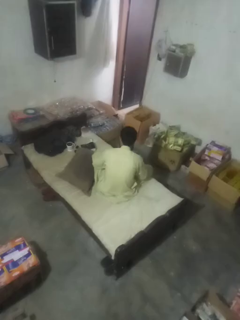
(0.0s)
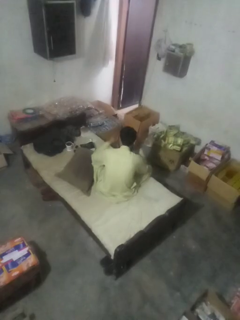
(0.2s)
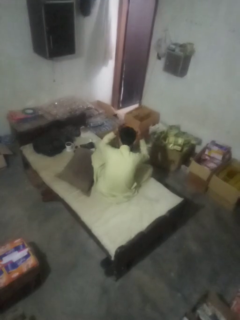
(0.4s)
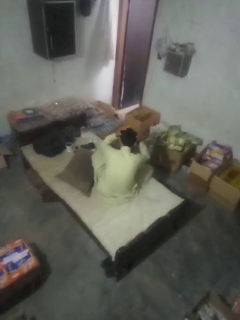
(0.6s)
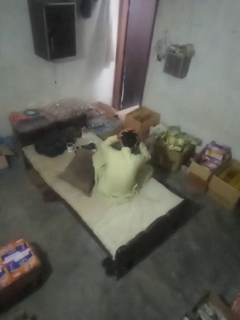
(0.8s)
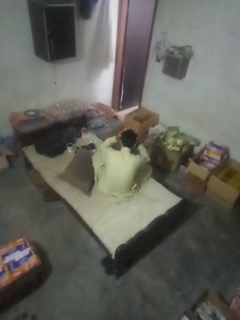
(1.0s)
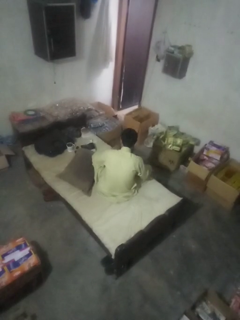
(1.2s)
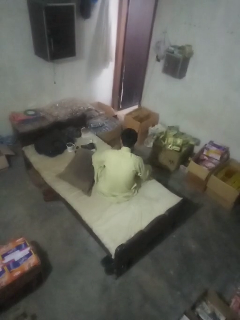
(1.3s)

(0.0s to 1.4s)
person pats head

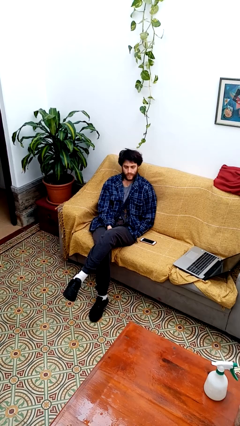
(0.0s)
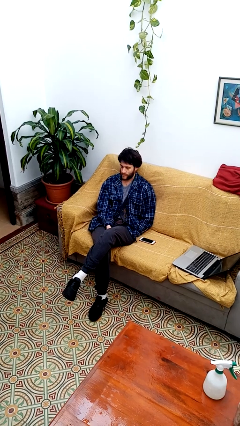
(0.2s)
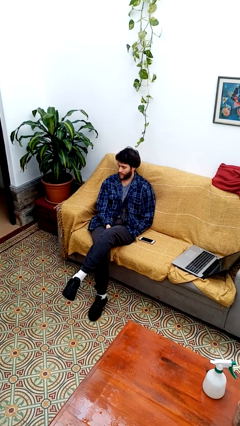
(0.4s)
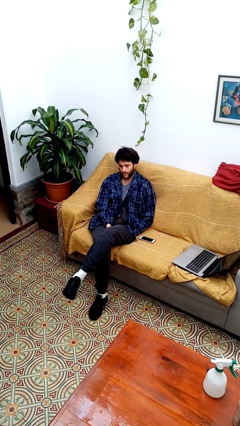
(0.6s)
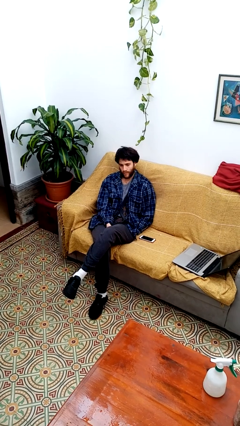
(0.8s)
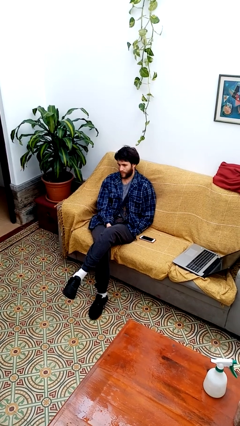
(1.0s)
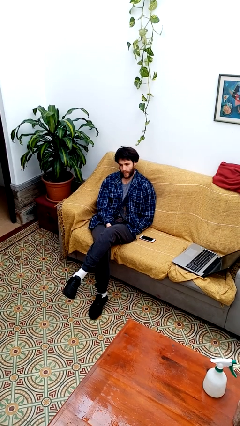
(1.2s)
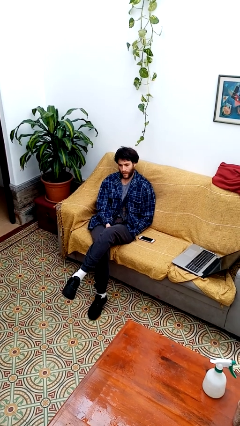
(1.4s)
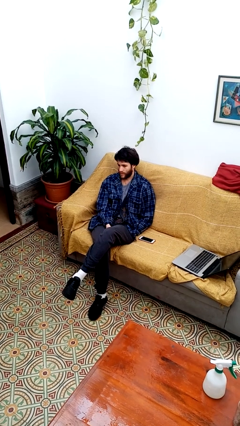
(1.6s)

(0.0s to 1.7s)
person shakes head

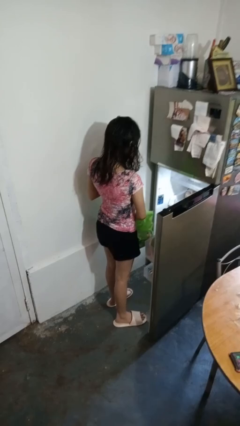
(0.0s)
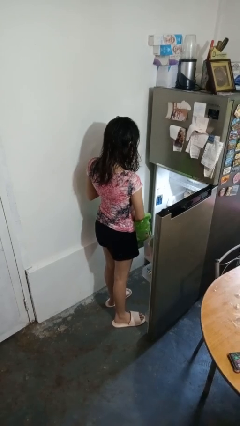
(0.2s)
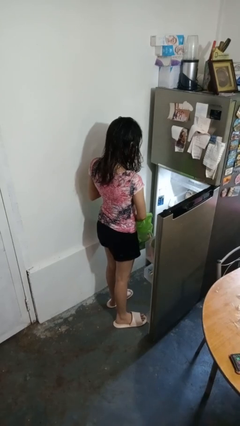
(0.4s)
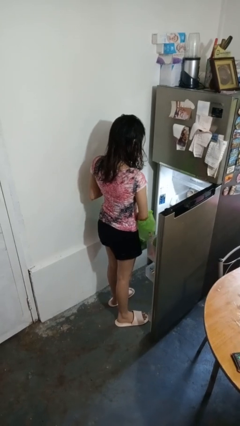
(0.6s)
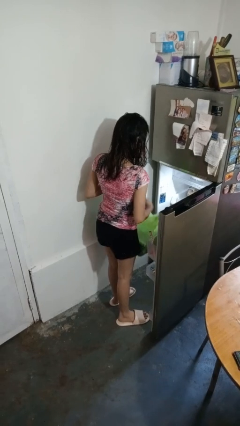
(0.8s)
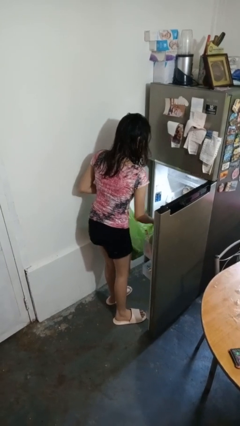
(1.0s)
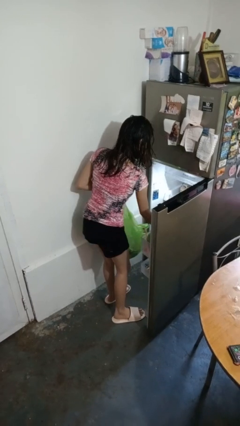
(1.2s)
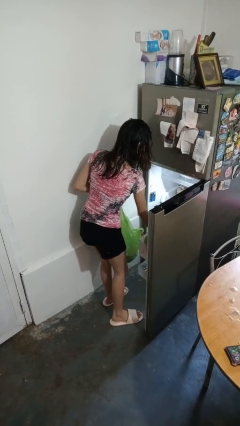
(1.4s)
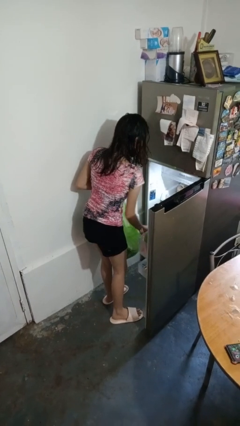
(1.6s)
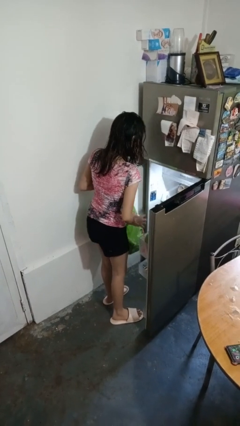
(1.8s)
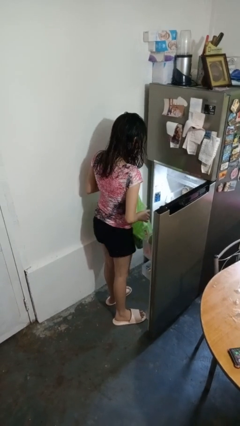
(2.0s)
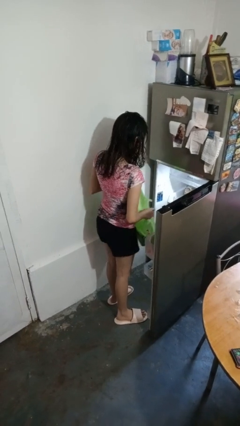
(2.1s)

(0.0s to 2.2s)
person loads groceries into refrigerator

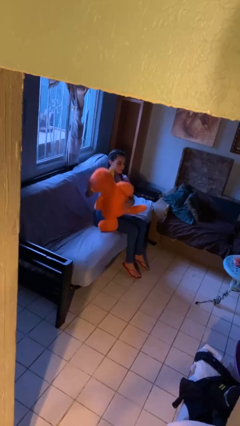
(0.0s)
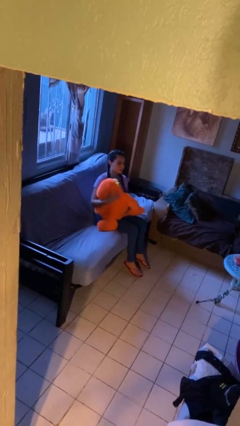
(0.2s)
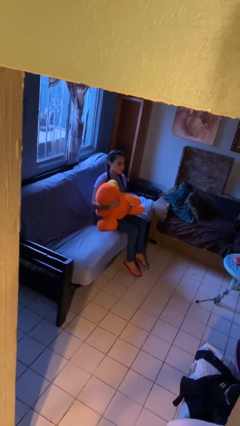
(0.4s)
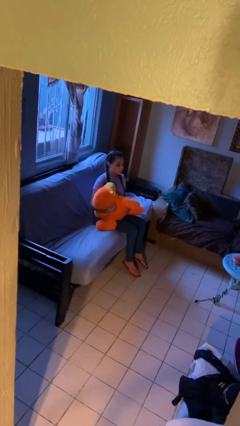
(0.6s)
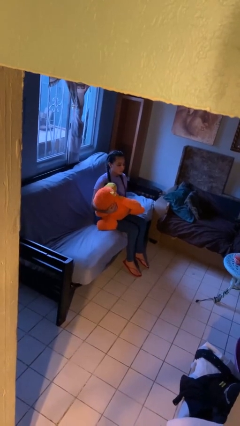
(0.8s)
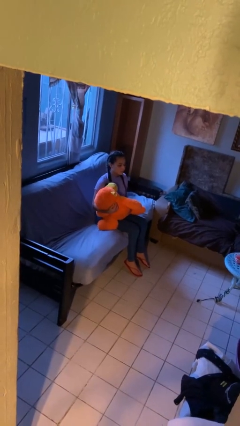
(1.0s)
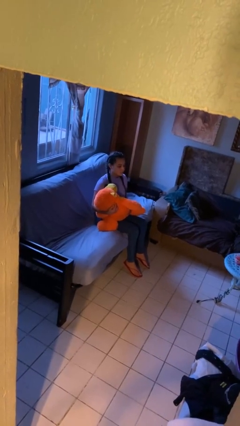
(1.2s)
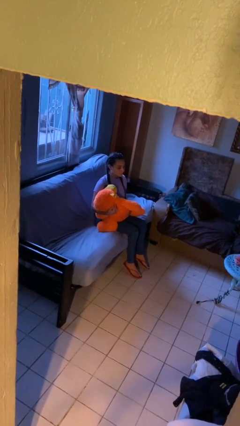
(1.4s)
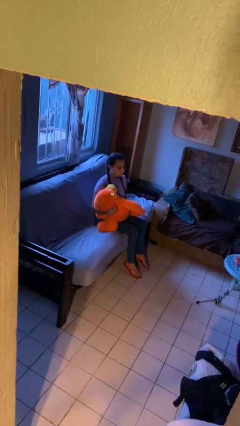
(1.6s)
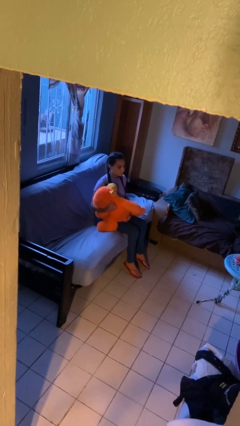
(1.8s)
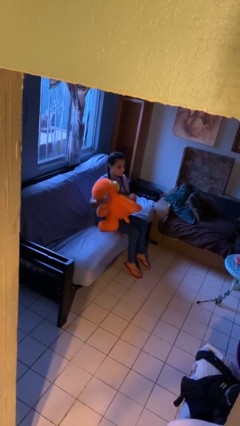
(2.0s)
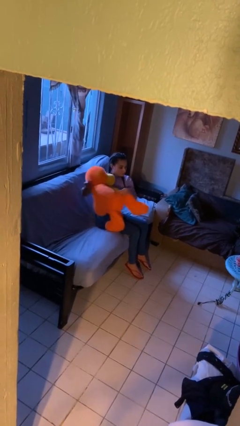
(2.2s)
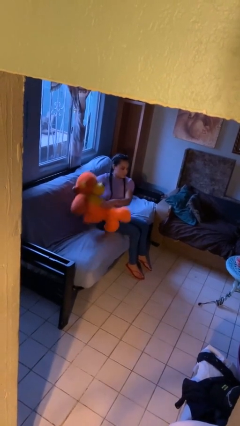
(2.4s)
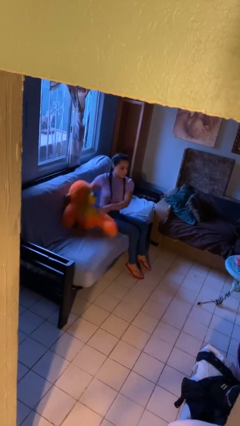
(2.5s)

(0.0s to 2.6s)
person hugs stuffed animal

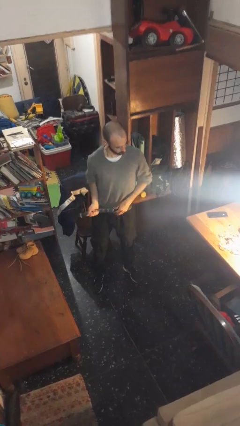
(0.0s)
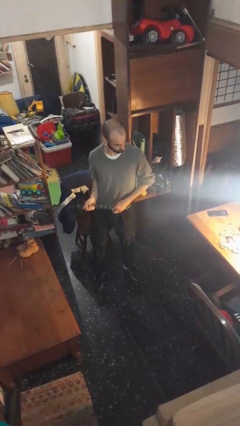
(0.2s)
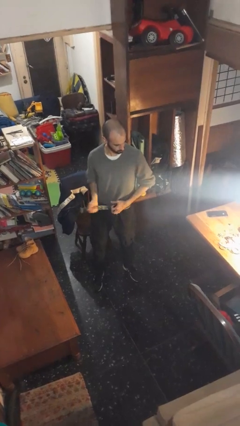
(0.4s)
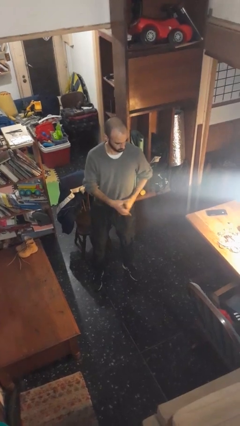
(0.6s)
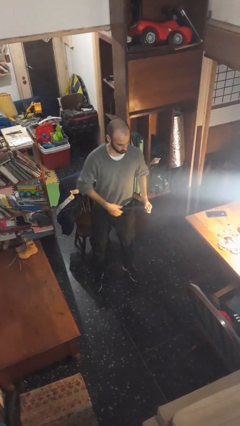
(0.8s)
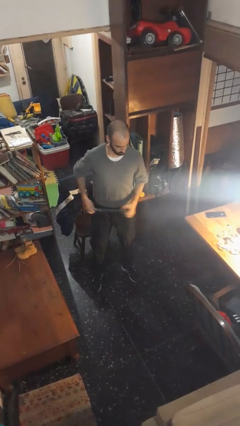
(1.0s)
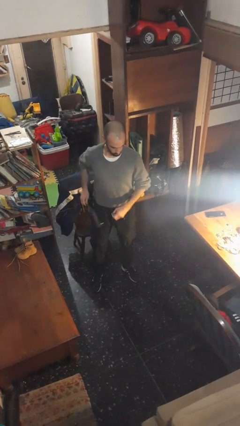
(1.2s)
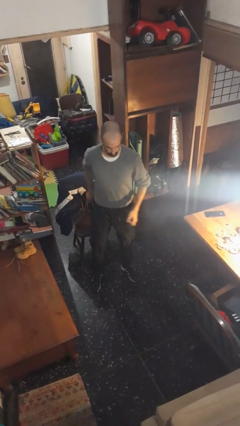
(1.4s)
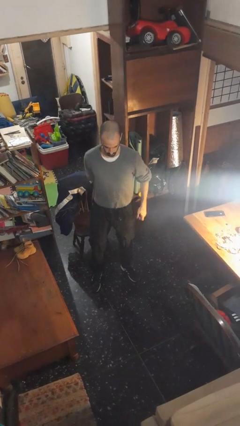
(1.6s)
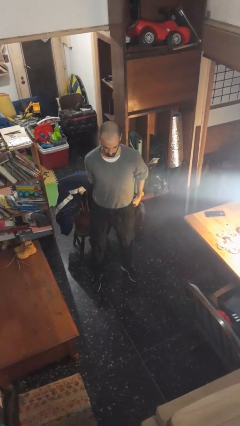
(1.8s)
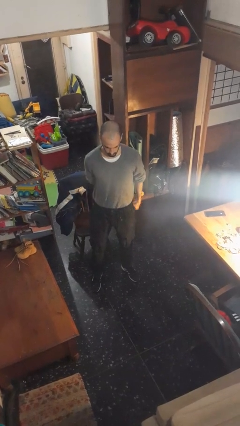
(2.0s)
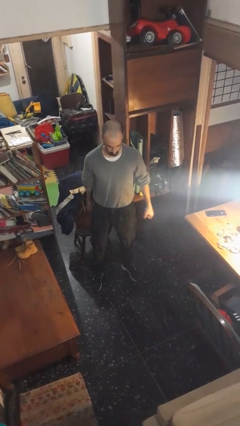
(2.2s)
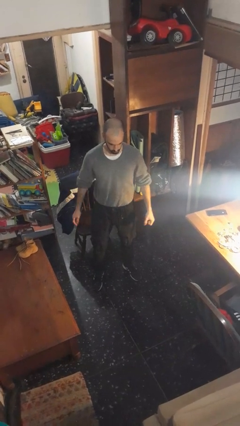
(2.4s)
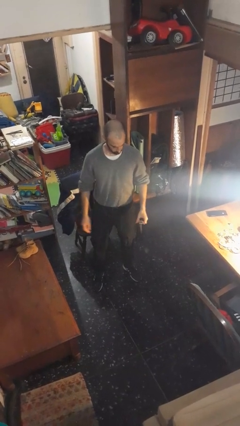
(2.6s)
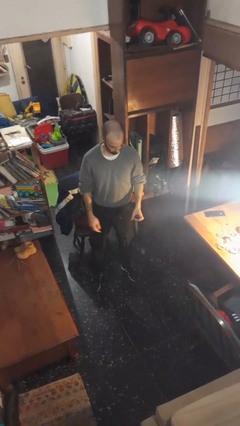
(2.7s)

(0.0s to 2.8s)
person takes off belt

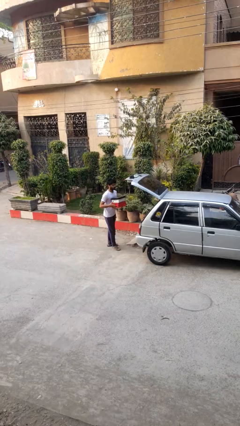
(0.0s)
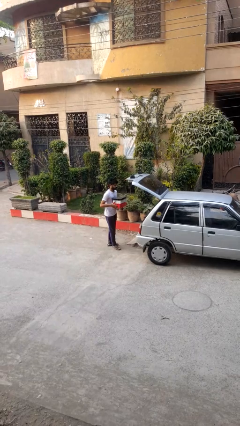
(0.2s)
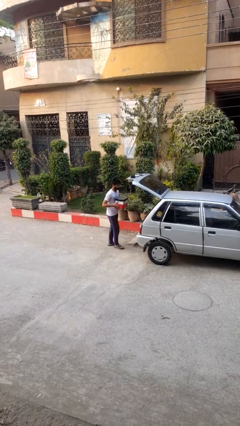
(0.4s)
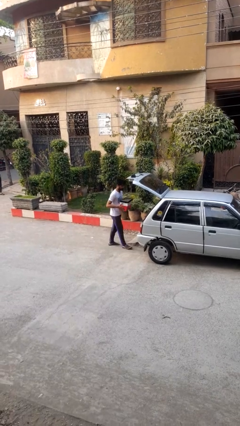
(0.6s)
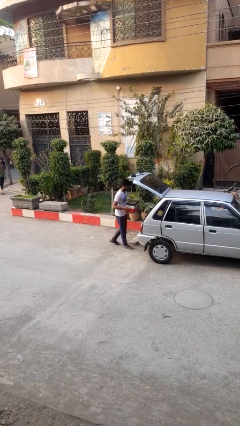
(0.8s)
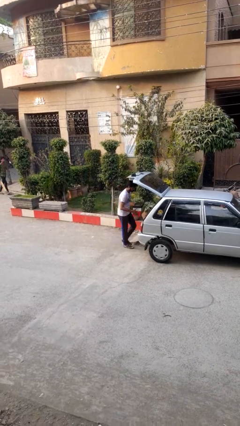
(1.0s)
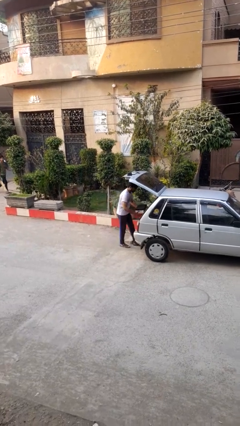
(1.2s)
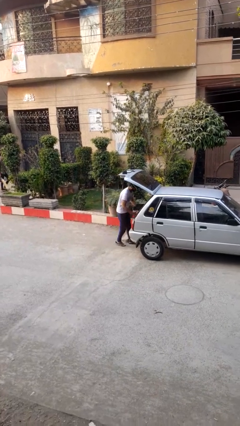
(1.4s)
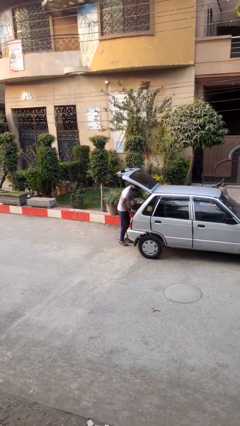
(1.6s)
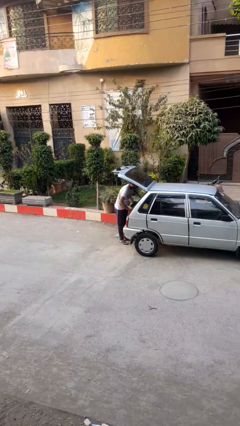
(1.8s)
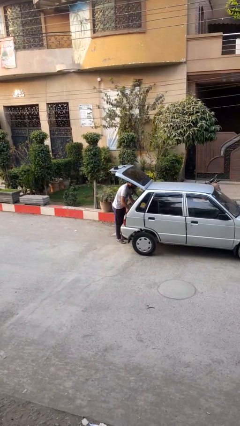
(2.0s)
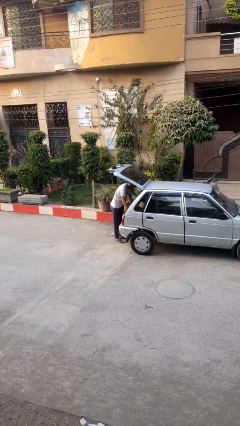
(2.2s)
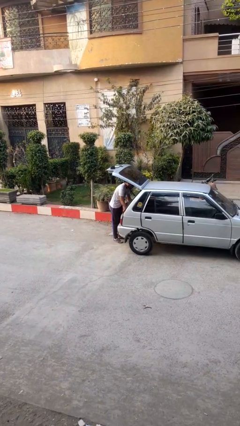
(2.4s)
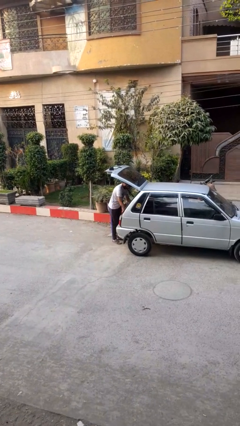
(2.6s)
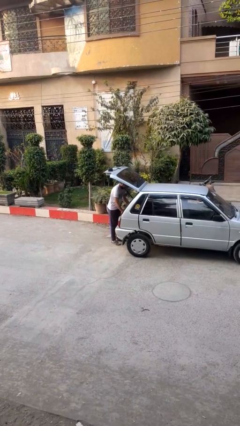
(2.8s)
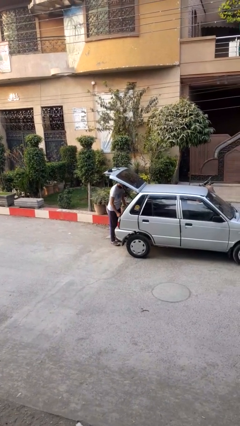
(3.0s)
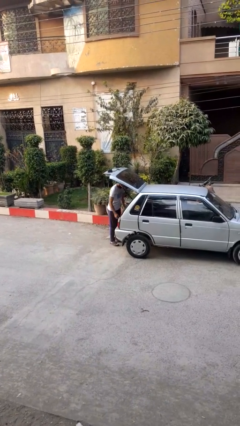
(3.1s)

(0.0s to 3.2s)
person loads car

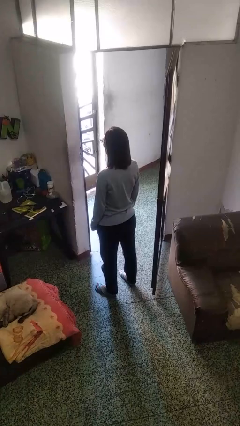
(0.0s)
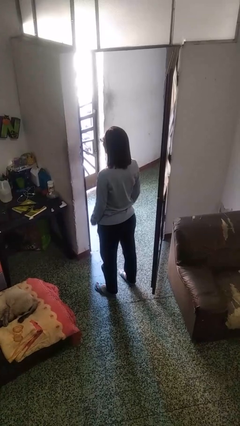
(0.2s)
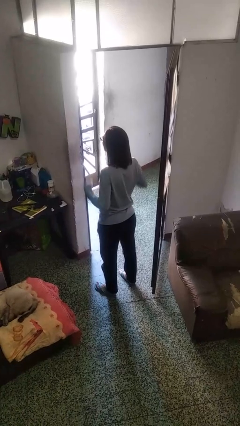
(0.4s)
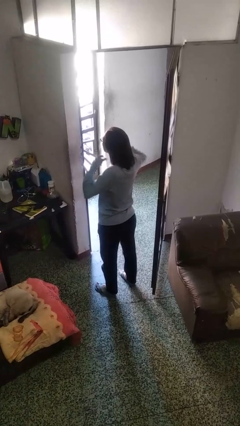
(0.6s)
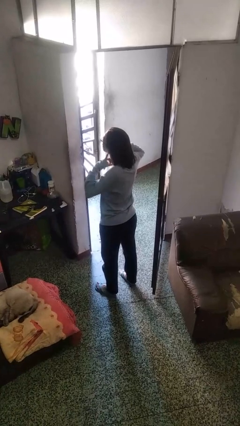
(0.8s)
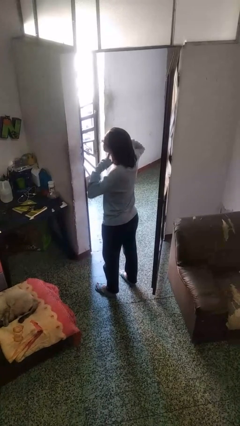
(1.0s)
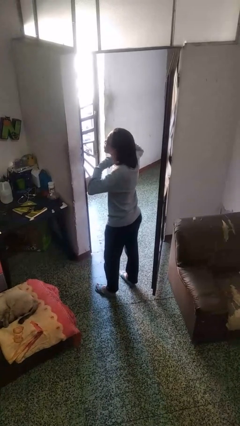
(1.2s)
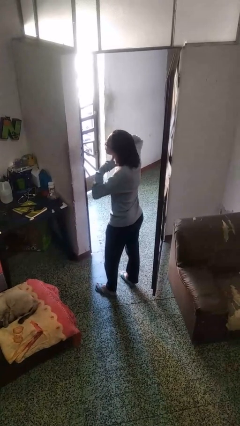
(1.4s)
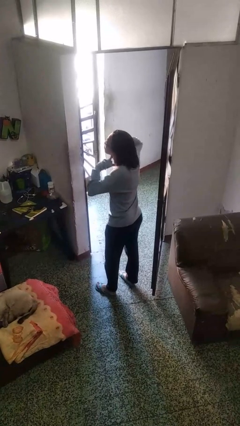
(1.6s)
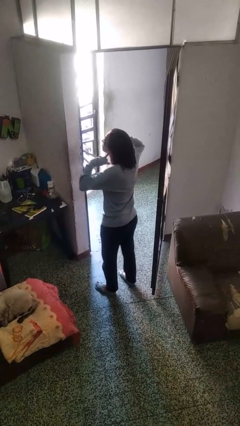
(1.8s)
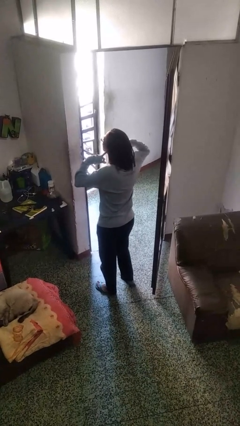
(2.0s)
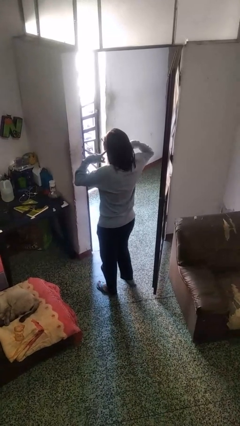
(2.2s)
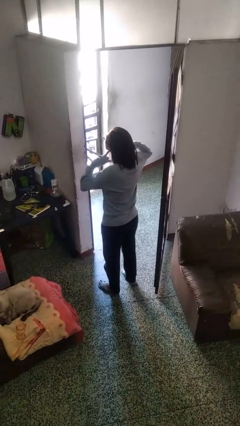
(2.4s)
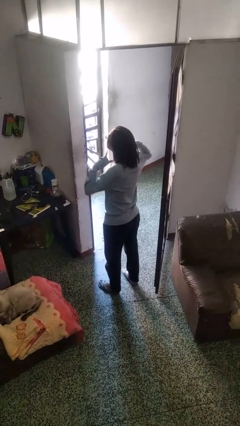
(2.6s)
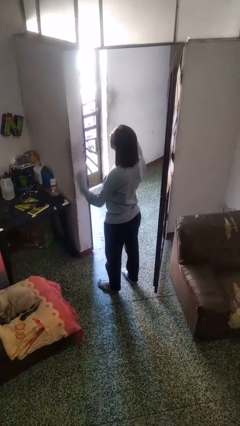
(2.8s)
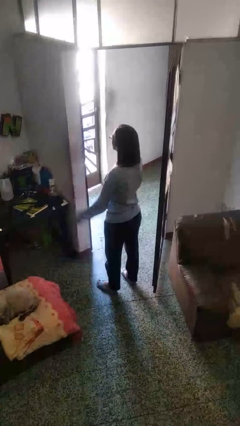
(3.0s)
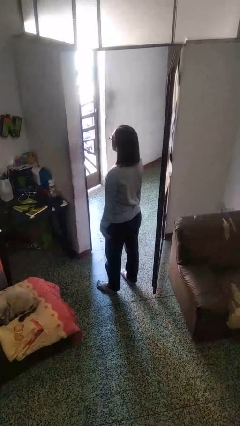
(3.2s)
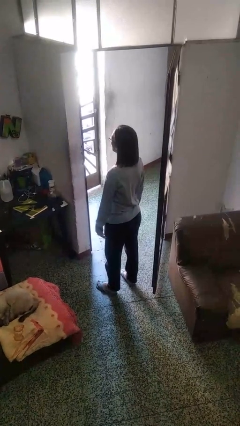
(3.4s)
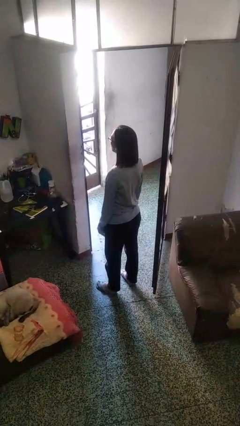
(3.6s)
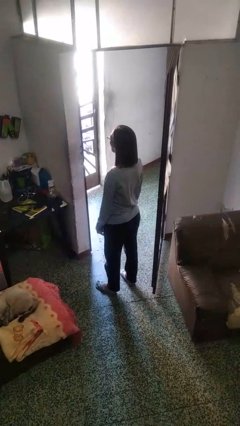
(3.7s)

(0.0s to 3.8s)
person puts fingers in ear
